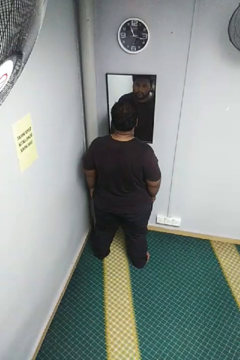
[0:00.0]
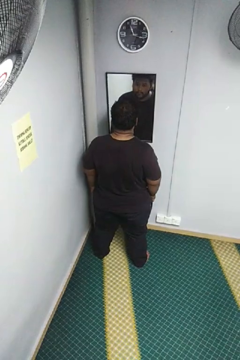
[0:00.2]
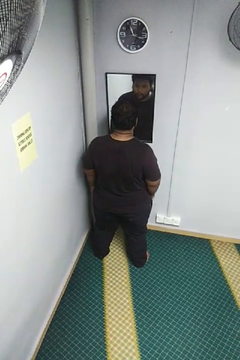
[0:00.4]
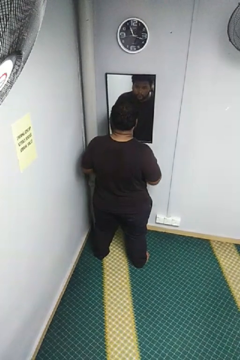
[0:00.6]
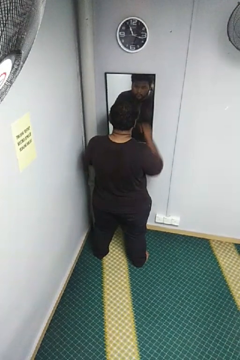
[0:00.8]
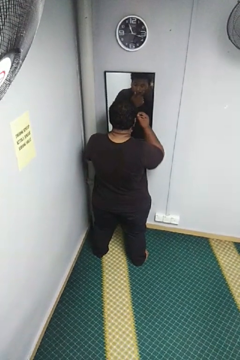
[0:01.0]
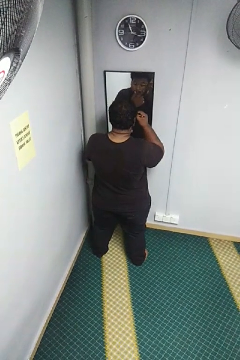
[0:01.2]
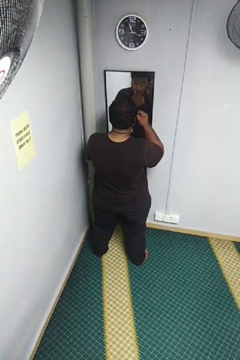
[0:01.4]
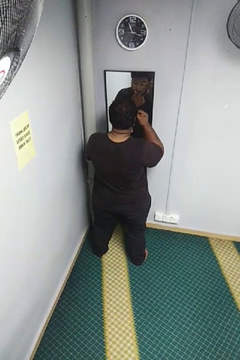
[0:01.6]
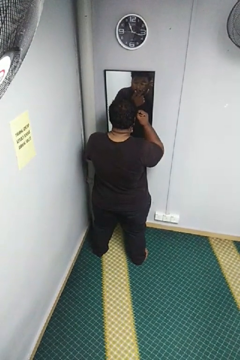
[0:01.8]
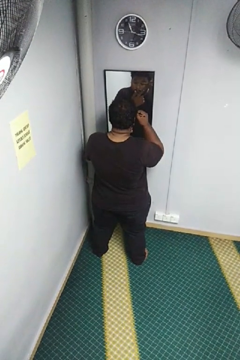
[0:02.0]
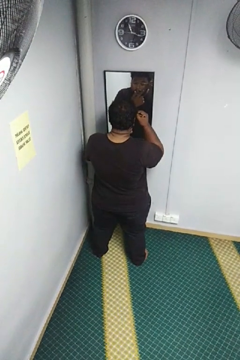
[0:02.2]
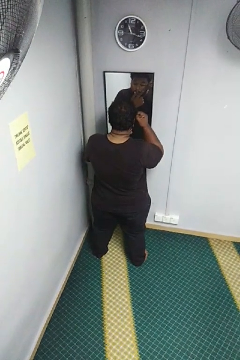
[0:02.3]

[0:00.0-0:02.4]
person applies eye makeup

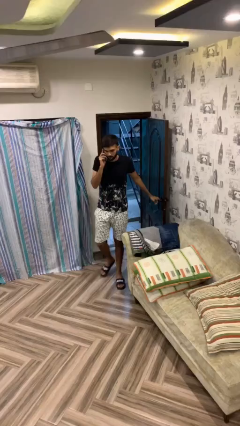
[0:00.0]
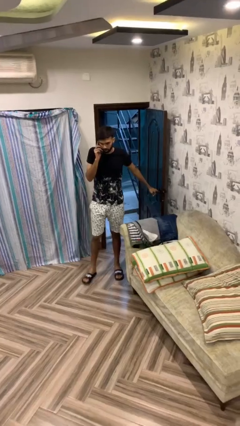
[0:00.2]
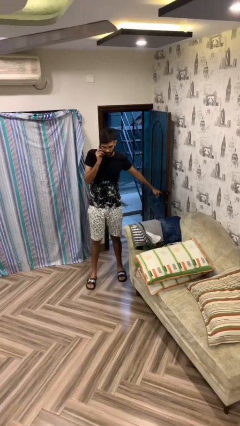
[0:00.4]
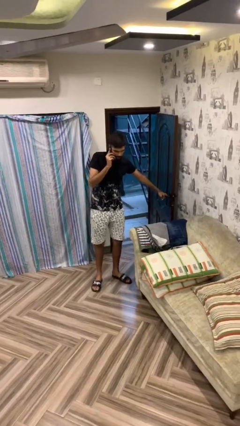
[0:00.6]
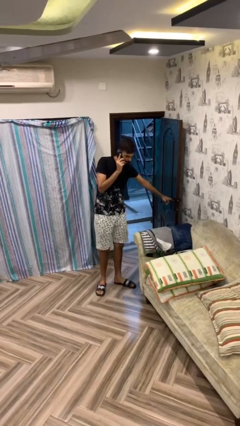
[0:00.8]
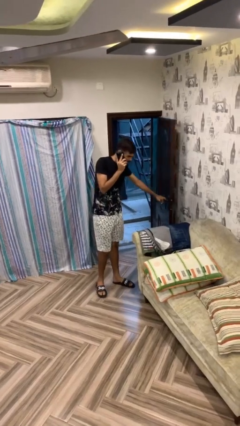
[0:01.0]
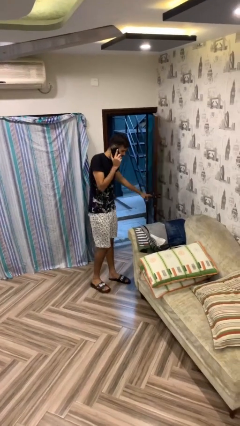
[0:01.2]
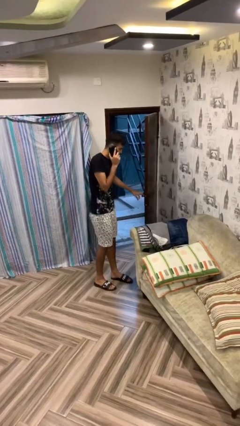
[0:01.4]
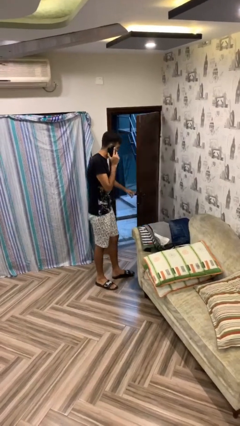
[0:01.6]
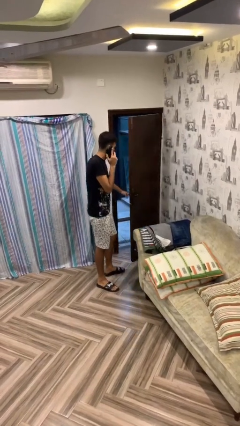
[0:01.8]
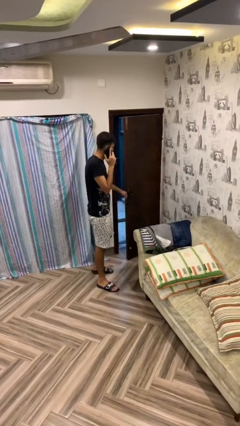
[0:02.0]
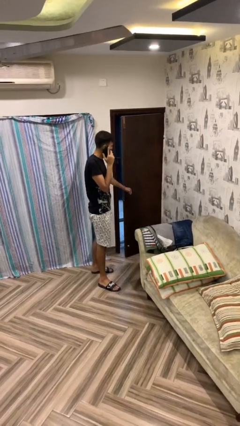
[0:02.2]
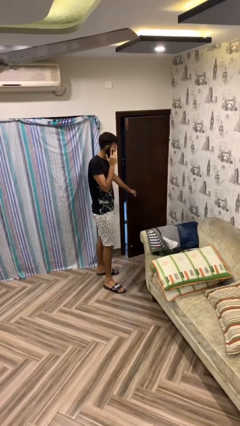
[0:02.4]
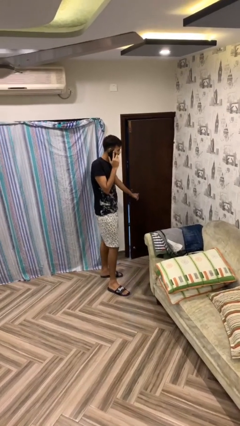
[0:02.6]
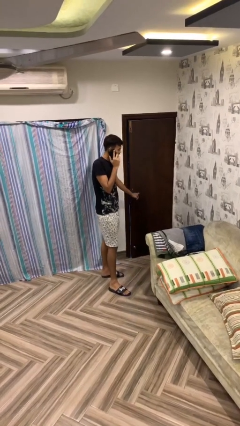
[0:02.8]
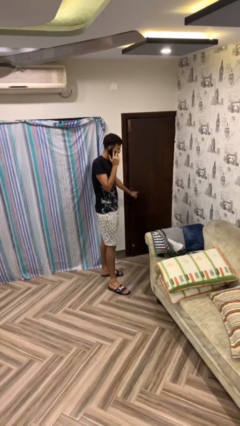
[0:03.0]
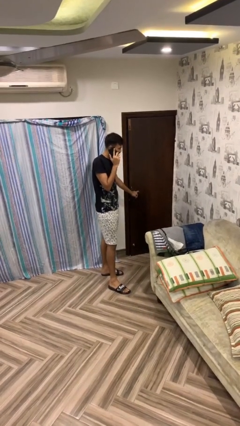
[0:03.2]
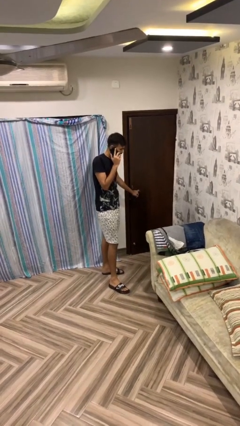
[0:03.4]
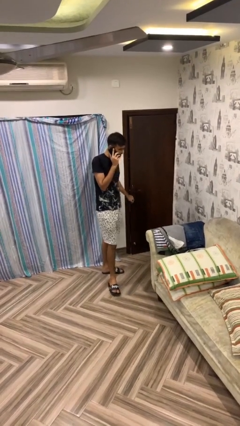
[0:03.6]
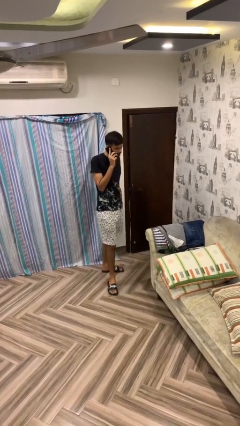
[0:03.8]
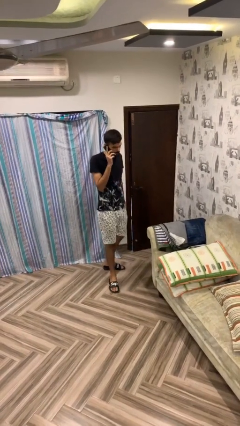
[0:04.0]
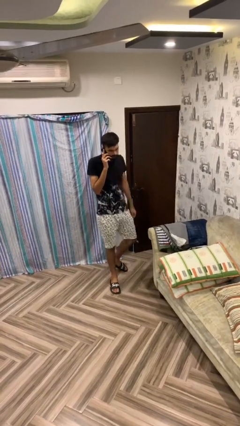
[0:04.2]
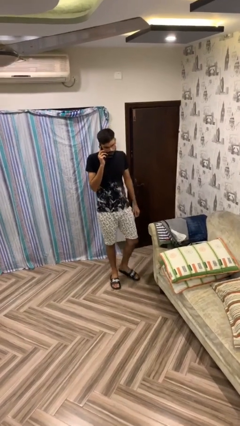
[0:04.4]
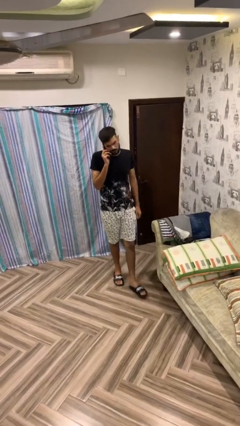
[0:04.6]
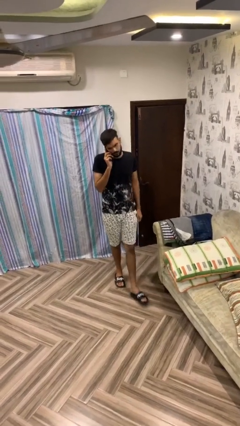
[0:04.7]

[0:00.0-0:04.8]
person closes facility door

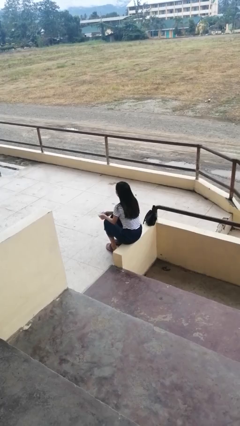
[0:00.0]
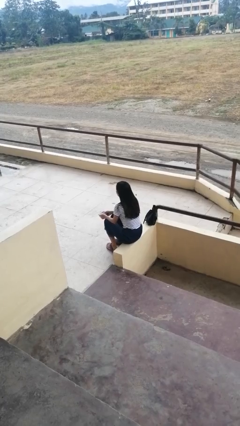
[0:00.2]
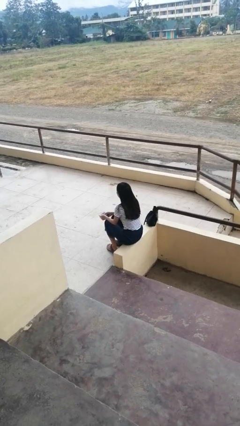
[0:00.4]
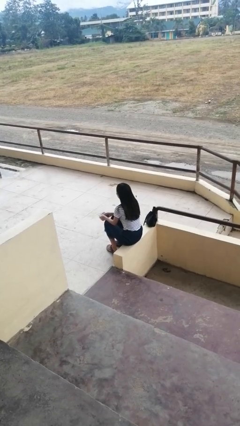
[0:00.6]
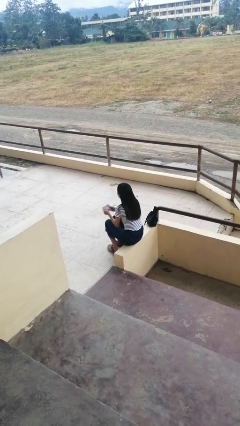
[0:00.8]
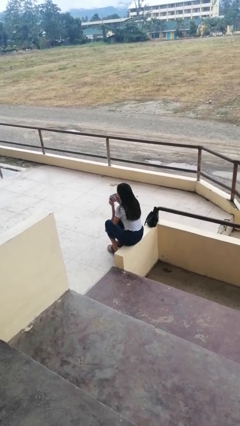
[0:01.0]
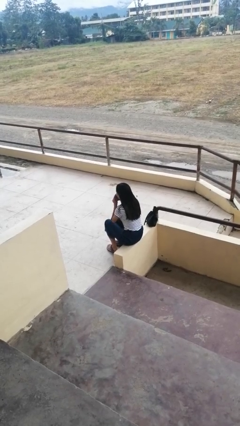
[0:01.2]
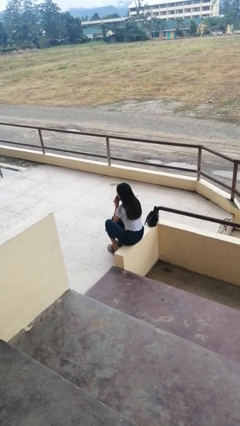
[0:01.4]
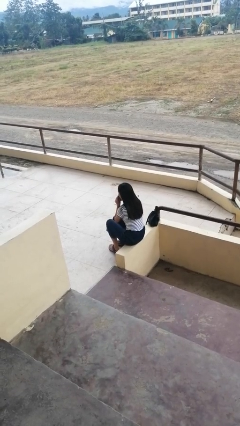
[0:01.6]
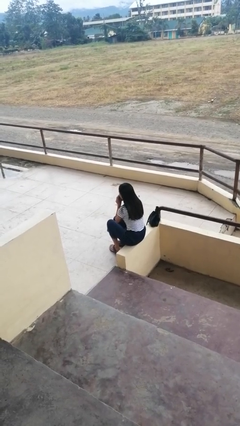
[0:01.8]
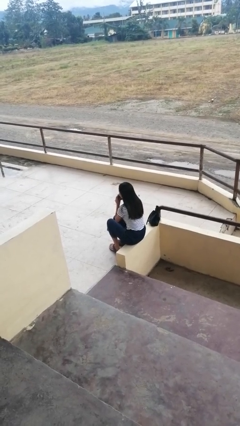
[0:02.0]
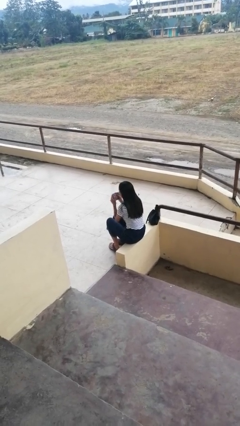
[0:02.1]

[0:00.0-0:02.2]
person blows nose

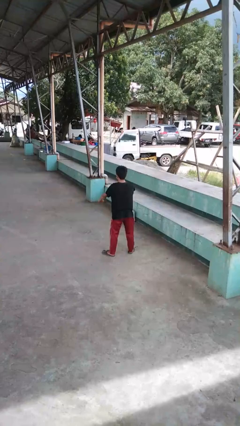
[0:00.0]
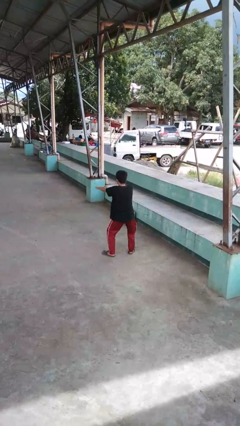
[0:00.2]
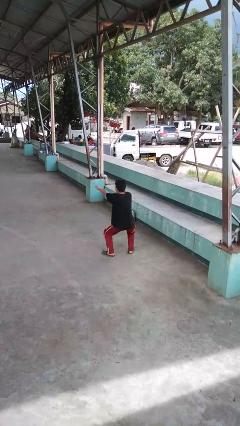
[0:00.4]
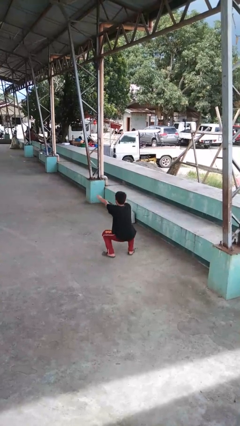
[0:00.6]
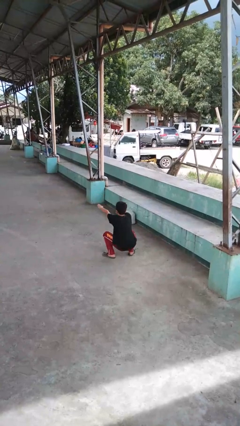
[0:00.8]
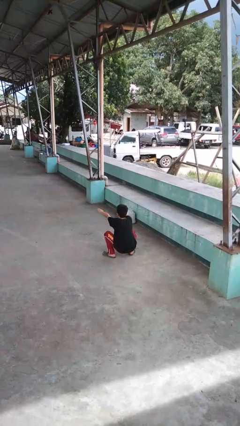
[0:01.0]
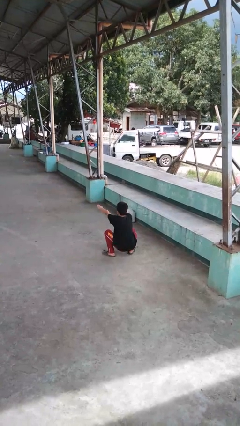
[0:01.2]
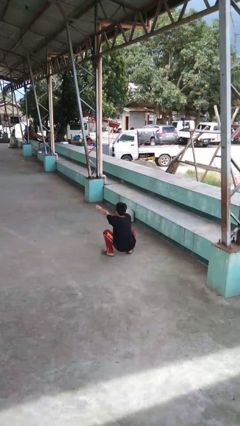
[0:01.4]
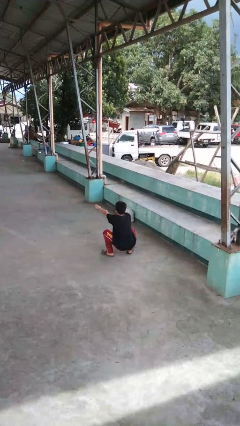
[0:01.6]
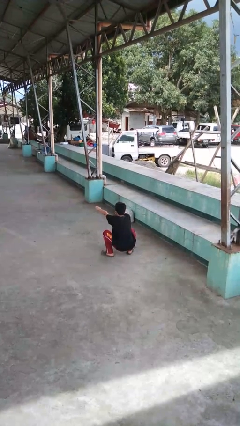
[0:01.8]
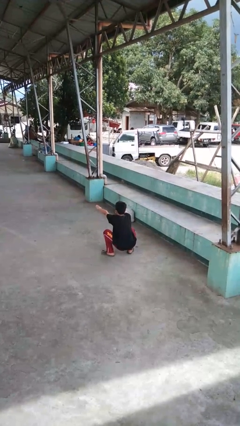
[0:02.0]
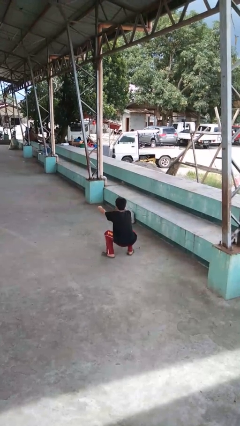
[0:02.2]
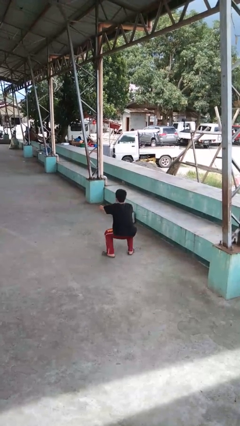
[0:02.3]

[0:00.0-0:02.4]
person squats

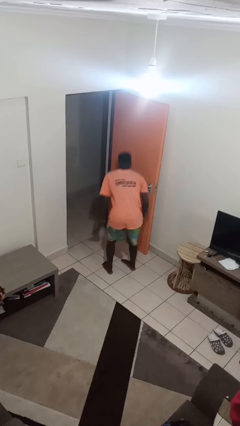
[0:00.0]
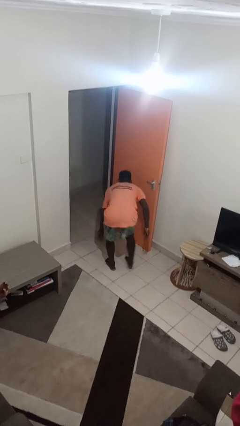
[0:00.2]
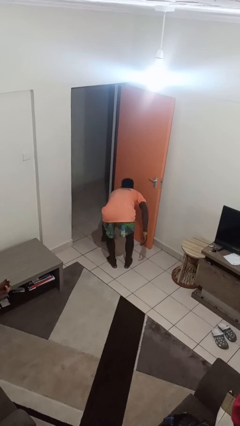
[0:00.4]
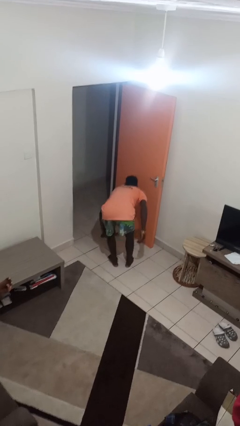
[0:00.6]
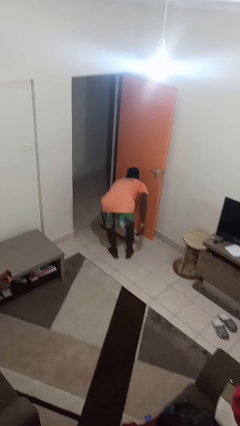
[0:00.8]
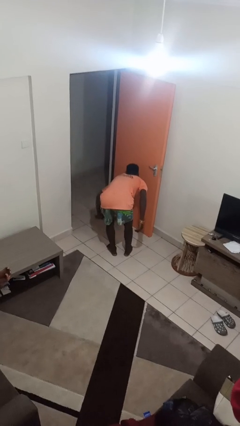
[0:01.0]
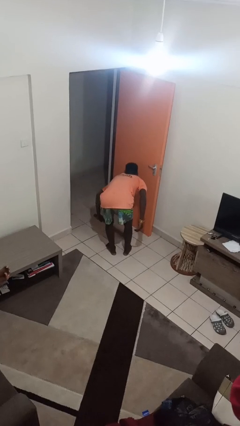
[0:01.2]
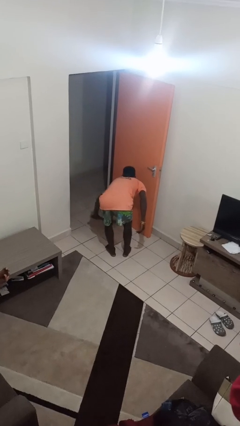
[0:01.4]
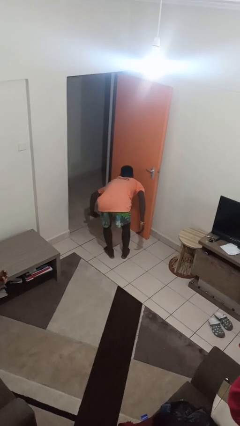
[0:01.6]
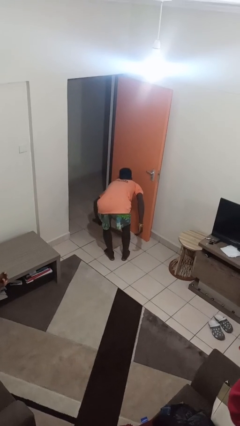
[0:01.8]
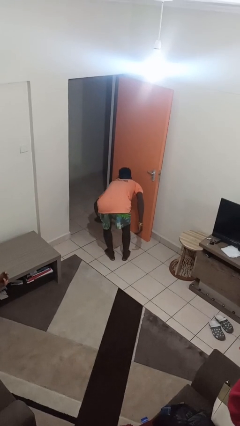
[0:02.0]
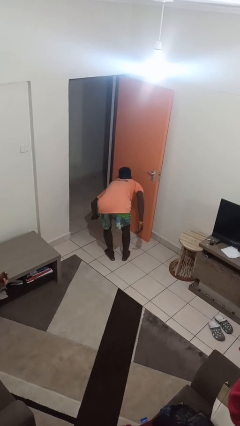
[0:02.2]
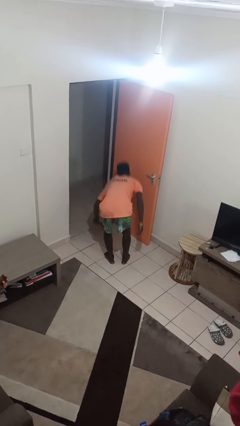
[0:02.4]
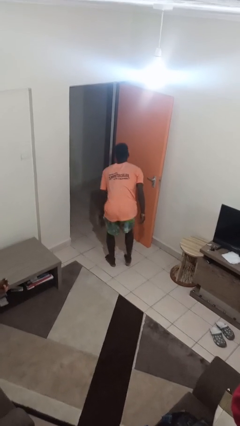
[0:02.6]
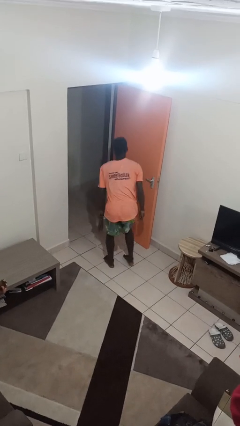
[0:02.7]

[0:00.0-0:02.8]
person sweeps floor

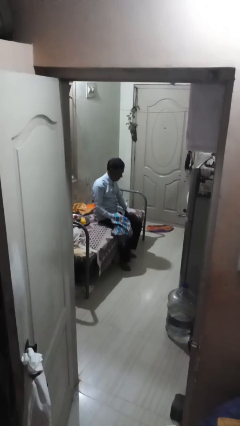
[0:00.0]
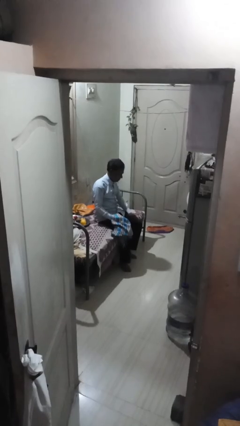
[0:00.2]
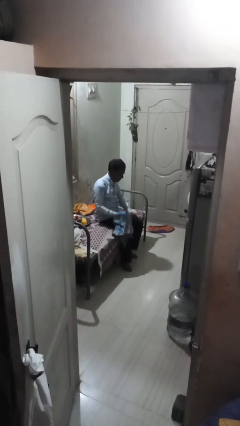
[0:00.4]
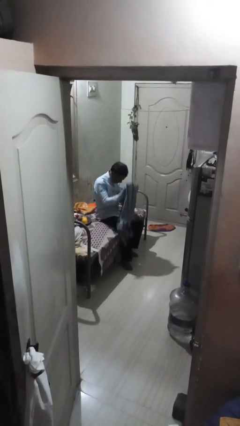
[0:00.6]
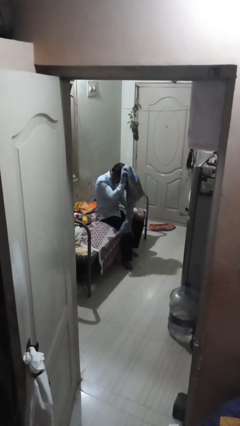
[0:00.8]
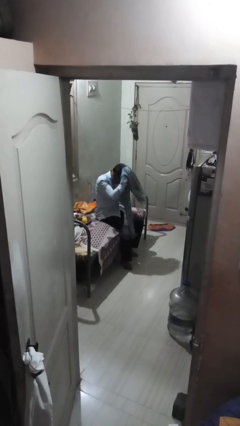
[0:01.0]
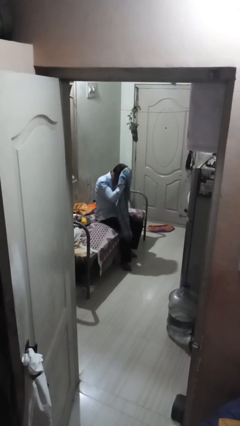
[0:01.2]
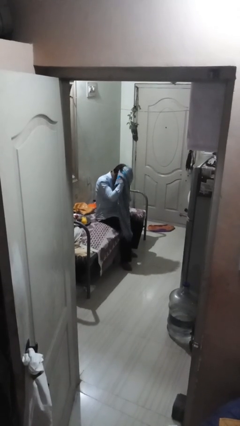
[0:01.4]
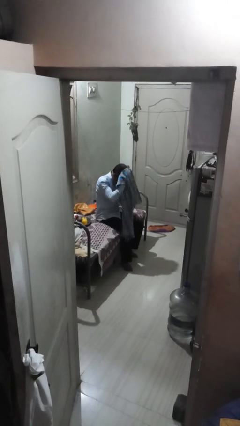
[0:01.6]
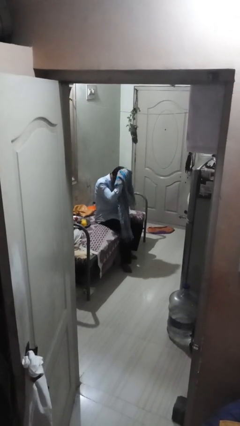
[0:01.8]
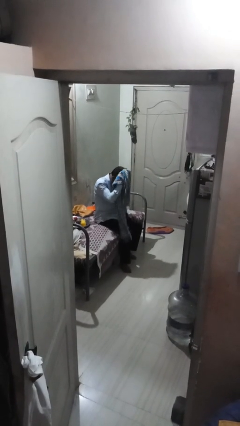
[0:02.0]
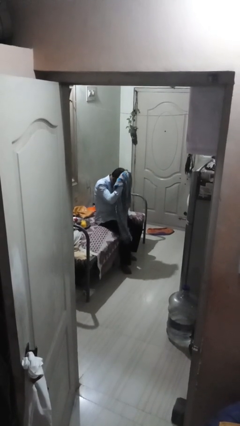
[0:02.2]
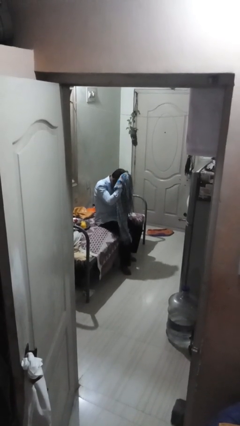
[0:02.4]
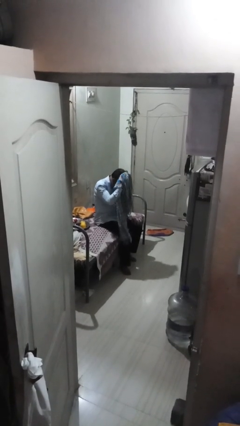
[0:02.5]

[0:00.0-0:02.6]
person dries hair with towel

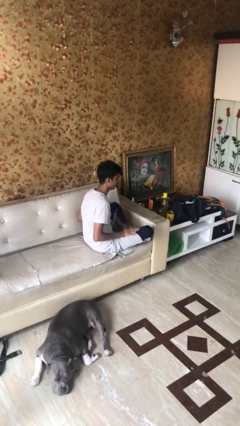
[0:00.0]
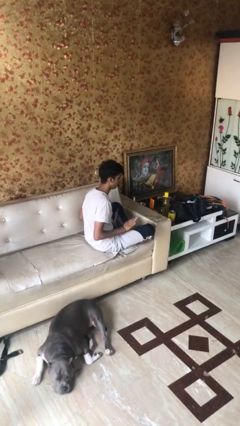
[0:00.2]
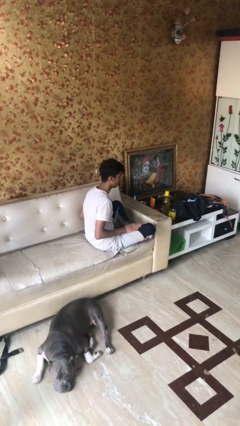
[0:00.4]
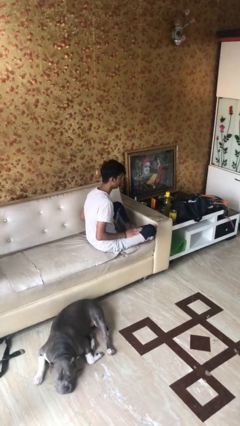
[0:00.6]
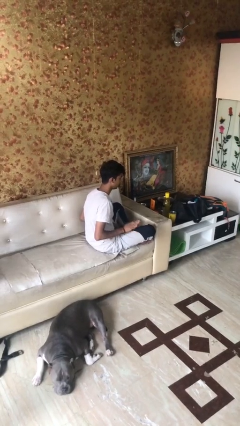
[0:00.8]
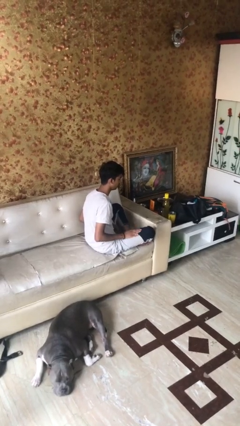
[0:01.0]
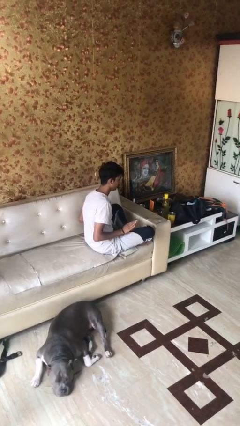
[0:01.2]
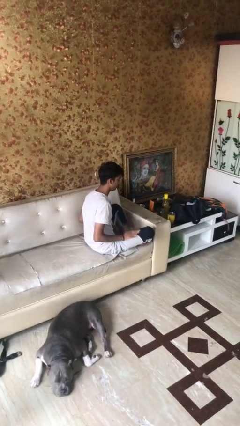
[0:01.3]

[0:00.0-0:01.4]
person slaps hands on thighs
